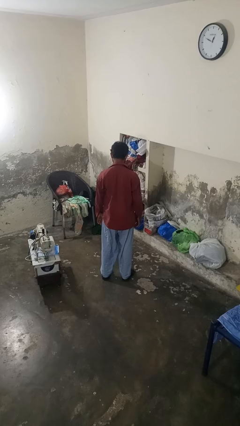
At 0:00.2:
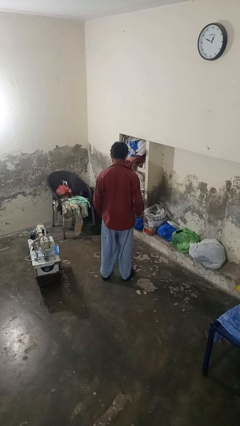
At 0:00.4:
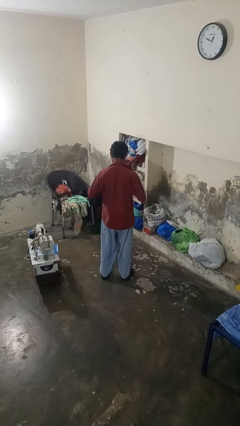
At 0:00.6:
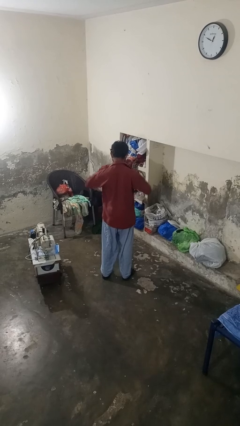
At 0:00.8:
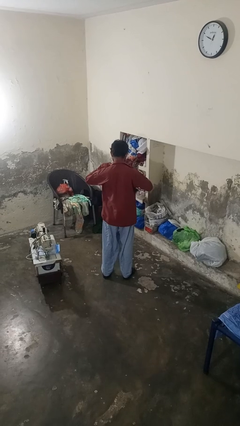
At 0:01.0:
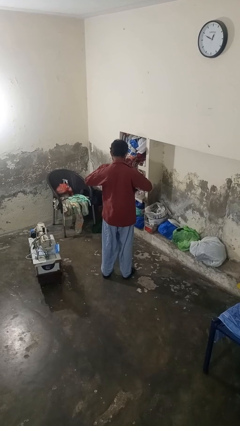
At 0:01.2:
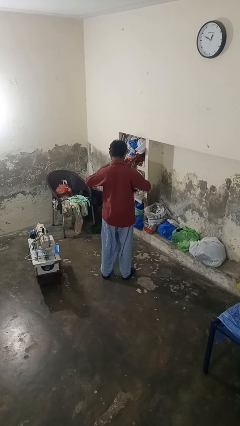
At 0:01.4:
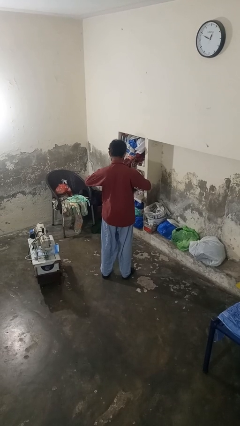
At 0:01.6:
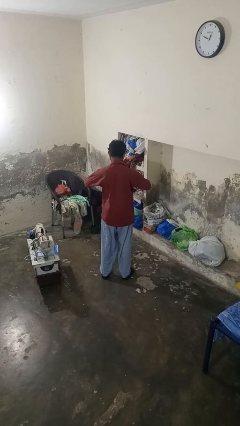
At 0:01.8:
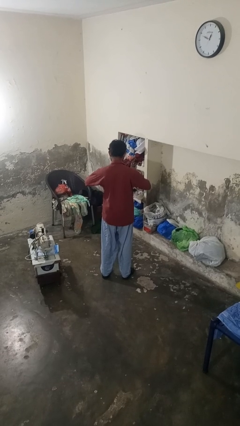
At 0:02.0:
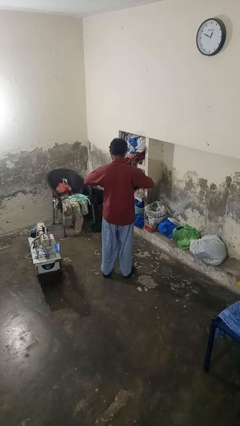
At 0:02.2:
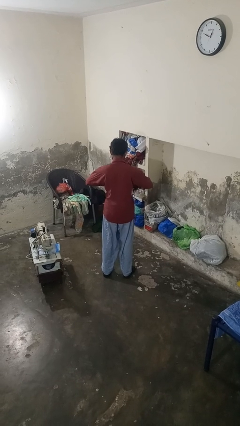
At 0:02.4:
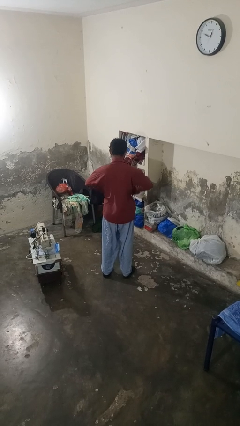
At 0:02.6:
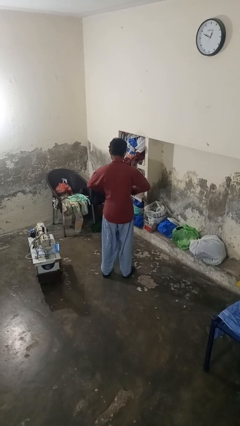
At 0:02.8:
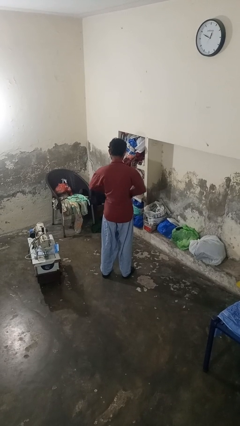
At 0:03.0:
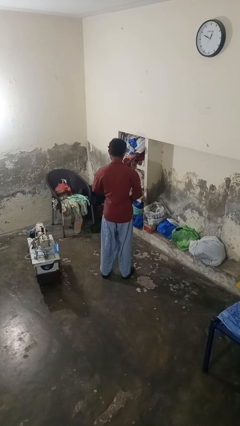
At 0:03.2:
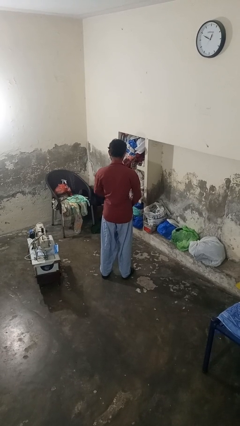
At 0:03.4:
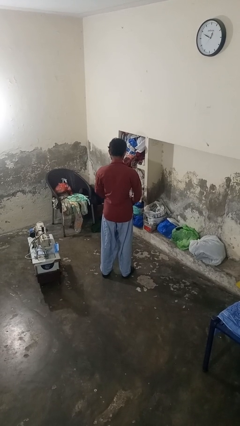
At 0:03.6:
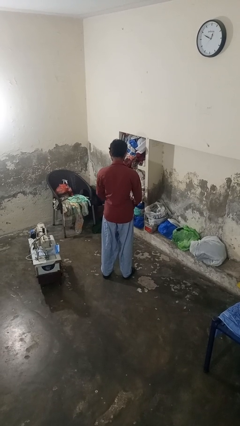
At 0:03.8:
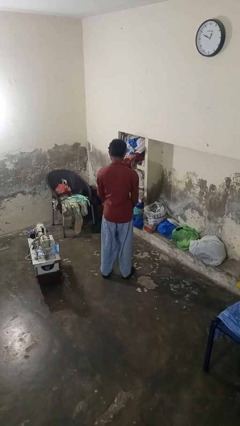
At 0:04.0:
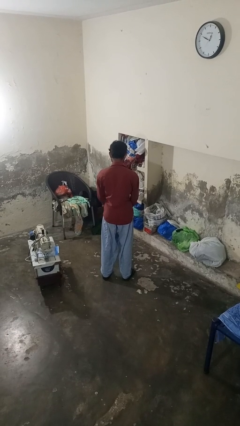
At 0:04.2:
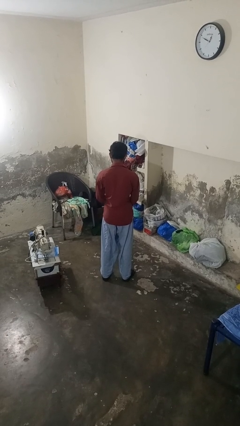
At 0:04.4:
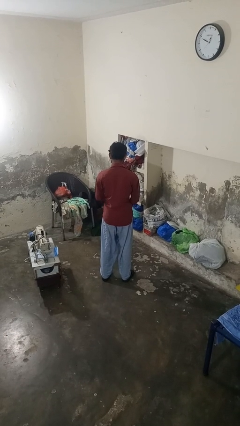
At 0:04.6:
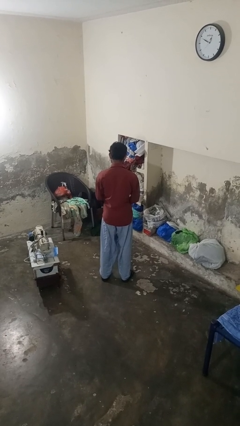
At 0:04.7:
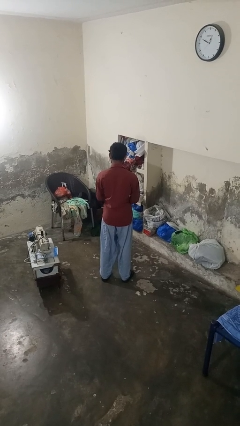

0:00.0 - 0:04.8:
person buttons shirt

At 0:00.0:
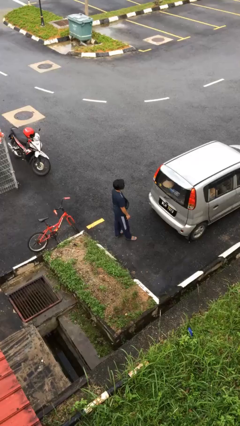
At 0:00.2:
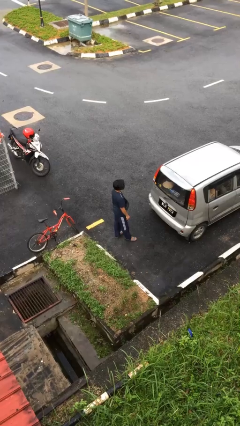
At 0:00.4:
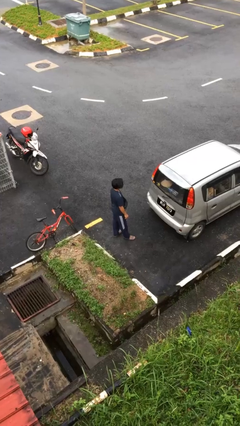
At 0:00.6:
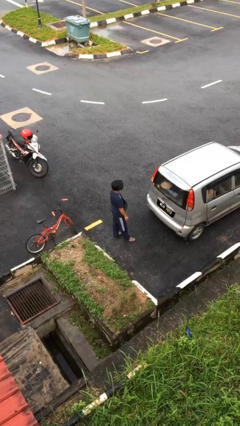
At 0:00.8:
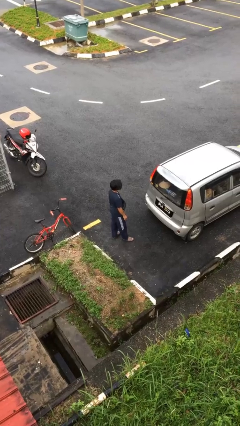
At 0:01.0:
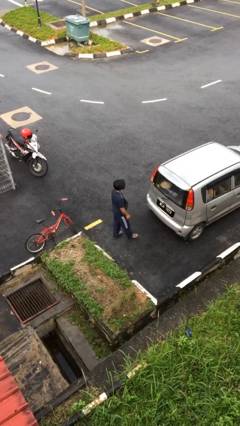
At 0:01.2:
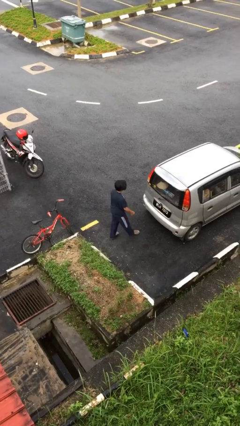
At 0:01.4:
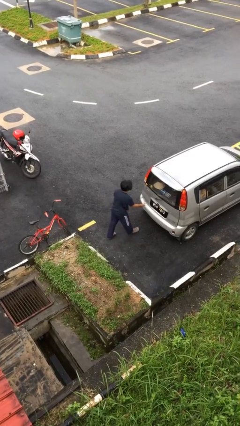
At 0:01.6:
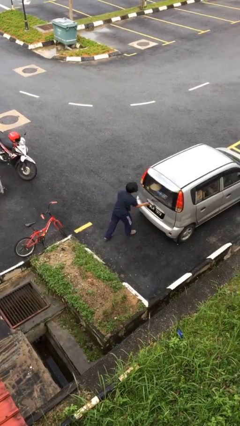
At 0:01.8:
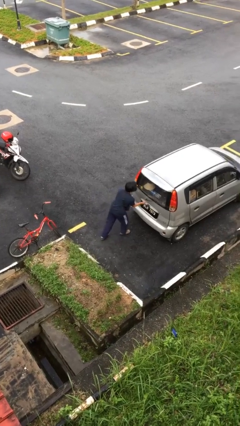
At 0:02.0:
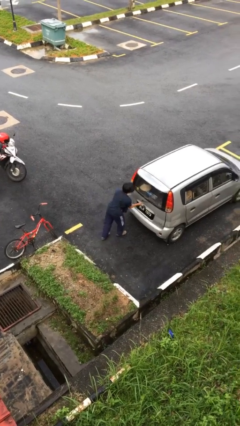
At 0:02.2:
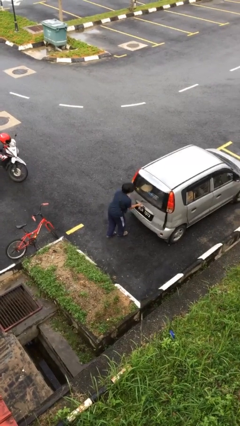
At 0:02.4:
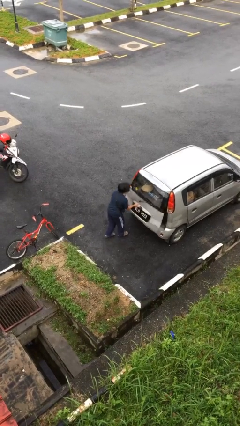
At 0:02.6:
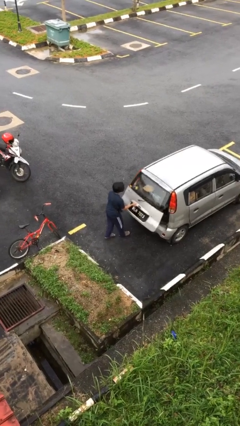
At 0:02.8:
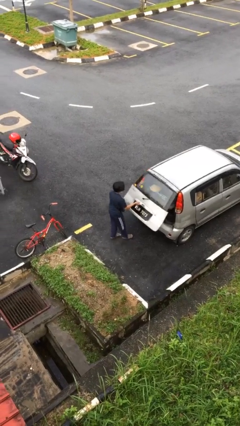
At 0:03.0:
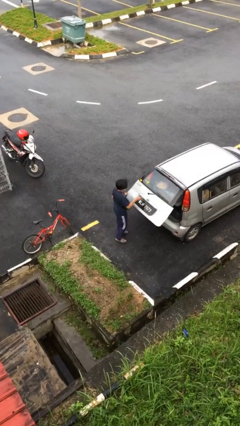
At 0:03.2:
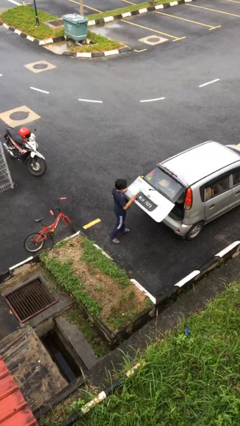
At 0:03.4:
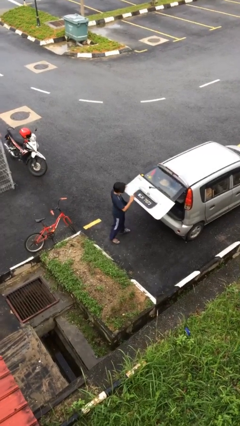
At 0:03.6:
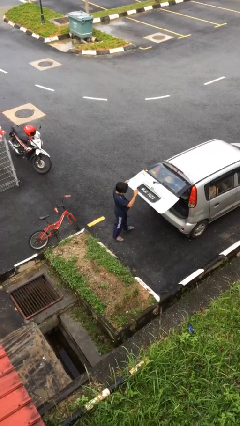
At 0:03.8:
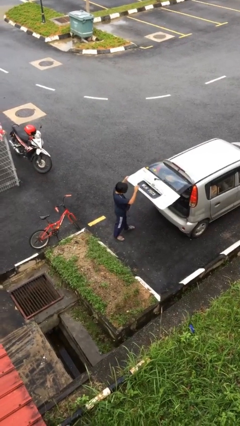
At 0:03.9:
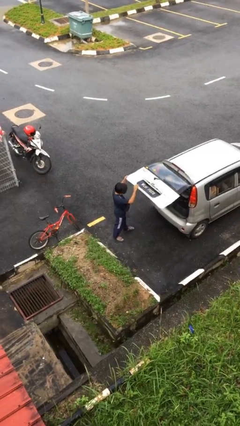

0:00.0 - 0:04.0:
person opens car trunk

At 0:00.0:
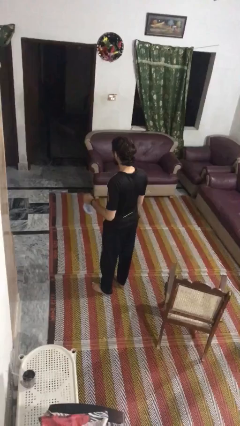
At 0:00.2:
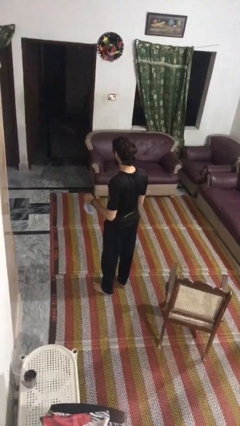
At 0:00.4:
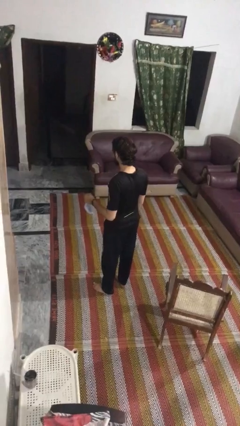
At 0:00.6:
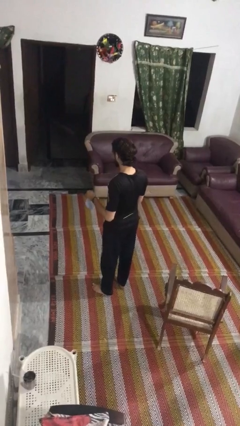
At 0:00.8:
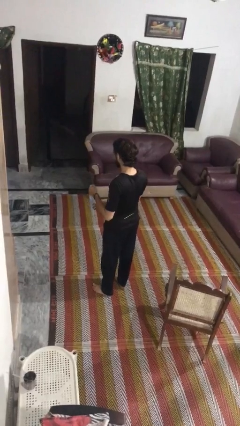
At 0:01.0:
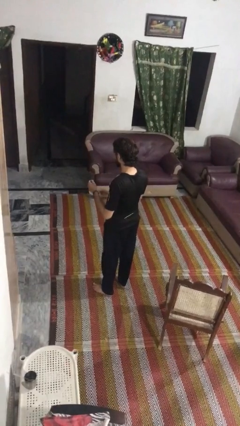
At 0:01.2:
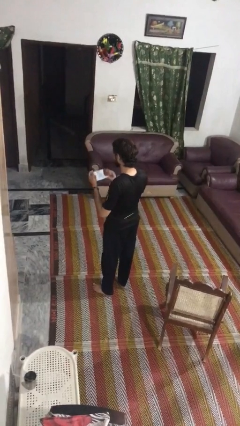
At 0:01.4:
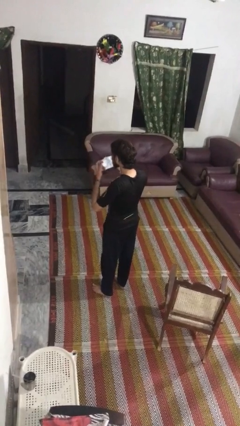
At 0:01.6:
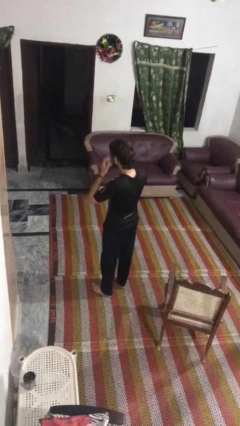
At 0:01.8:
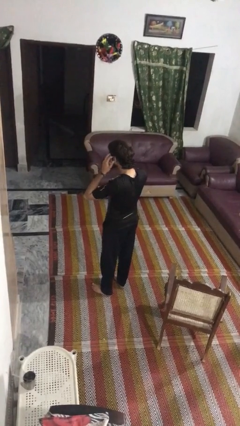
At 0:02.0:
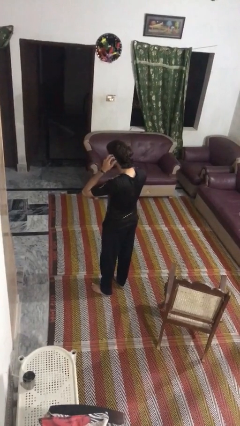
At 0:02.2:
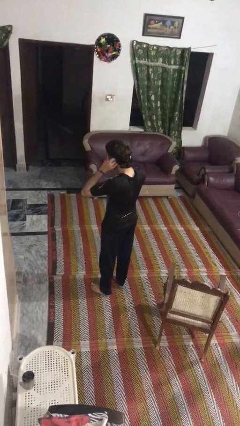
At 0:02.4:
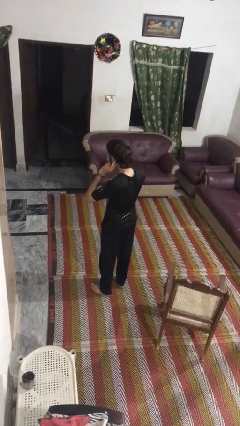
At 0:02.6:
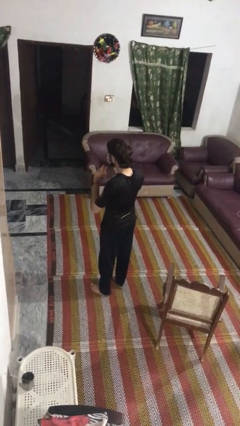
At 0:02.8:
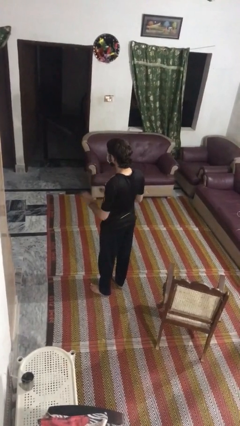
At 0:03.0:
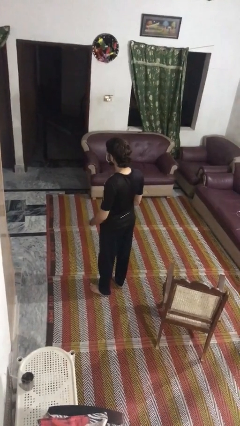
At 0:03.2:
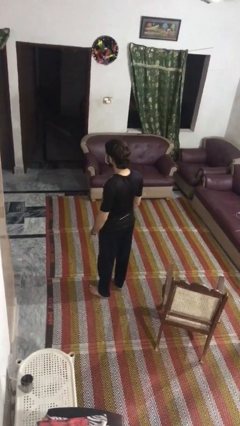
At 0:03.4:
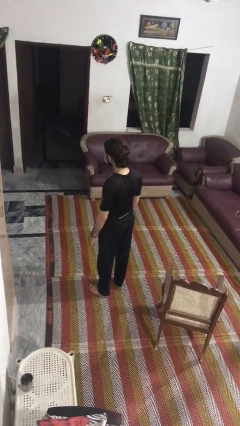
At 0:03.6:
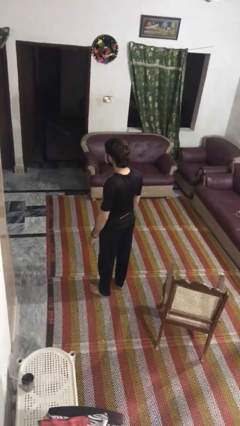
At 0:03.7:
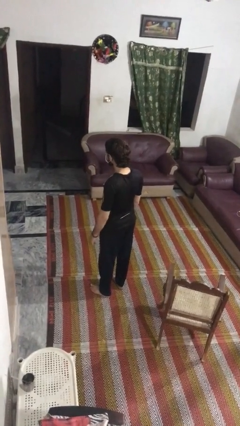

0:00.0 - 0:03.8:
person puts on facemask

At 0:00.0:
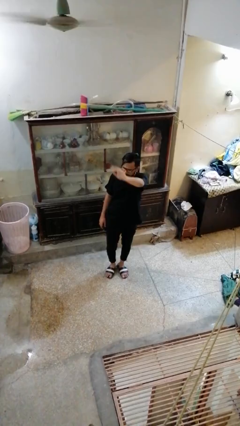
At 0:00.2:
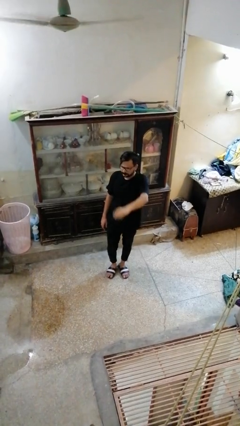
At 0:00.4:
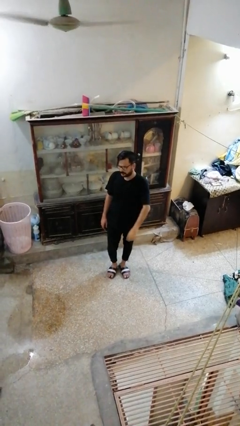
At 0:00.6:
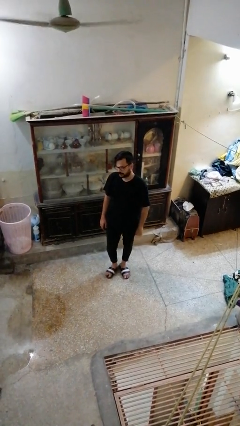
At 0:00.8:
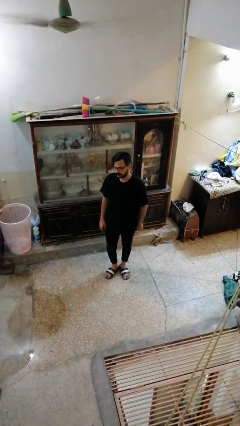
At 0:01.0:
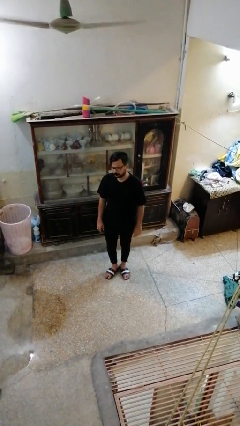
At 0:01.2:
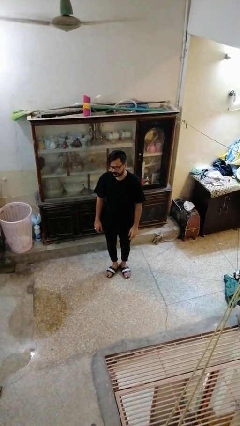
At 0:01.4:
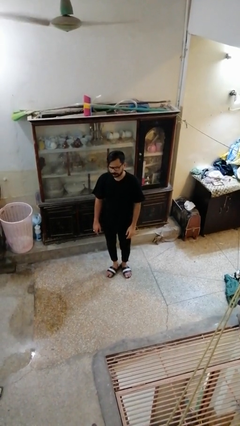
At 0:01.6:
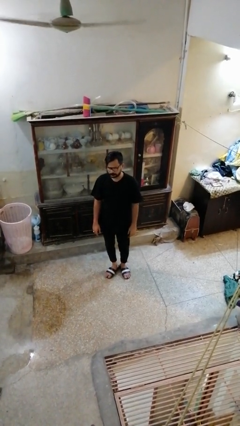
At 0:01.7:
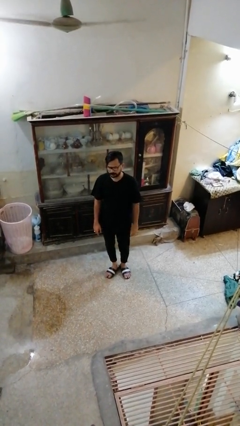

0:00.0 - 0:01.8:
person gestures lower hand

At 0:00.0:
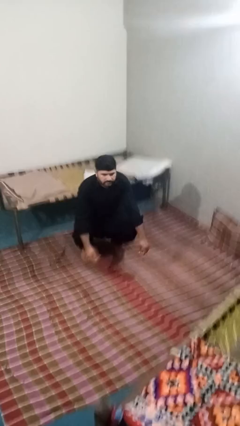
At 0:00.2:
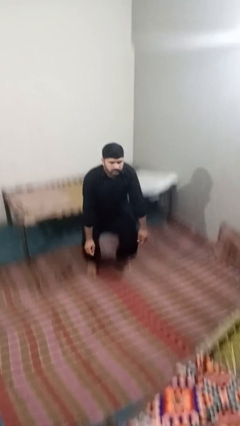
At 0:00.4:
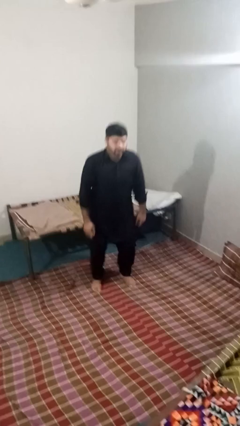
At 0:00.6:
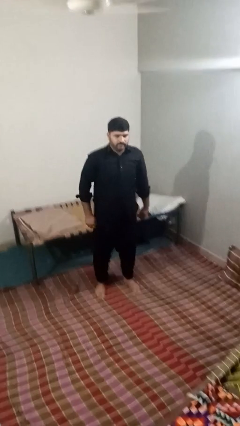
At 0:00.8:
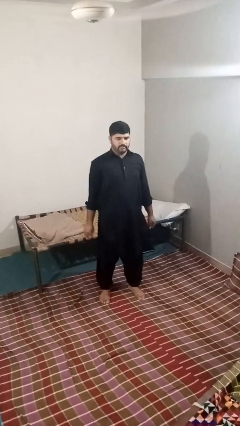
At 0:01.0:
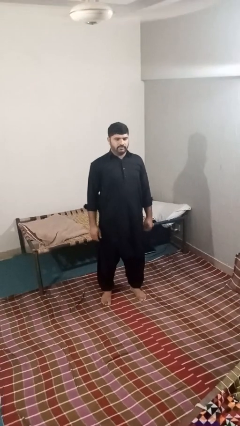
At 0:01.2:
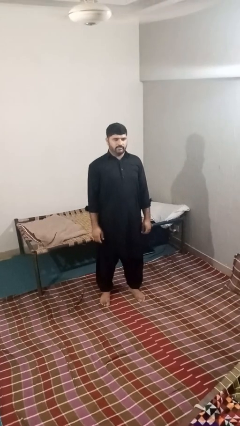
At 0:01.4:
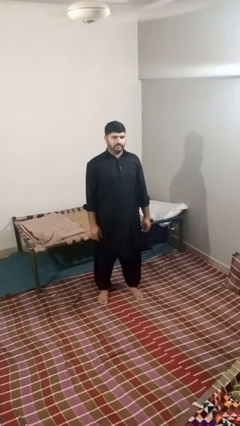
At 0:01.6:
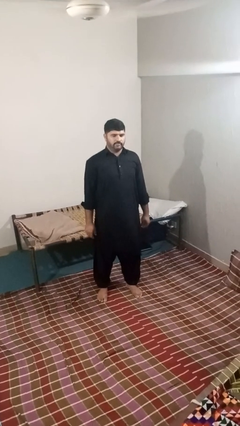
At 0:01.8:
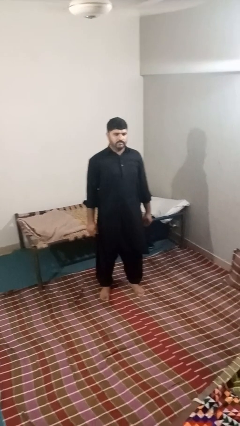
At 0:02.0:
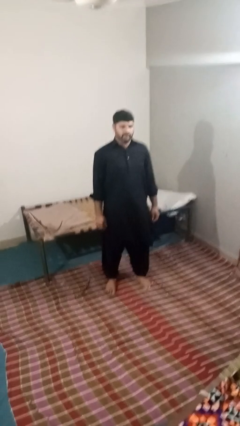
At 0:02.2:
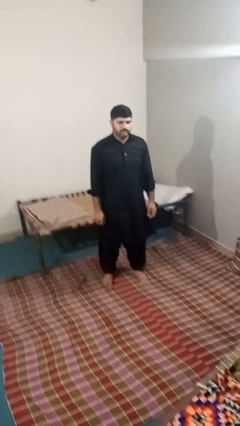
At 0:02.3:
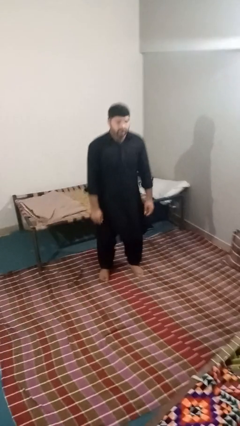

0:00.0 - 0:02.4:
person stands up

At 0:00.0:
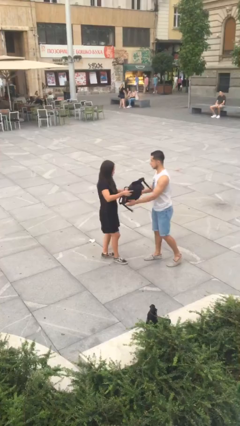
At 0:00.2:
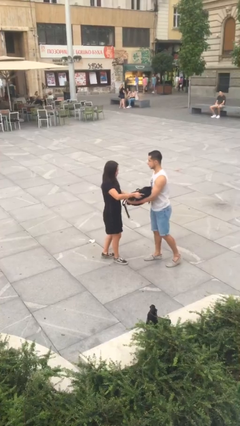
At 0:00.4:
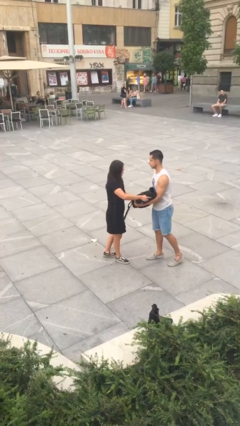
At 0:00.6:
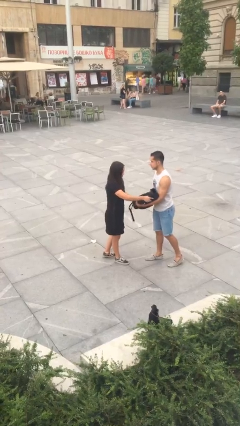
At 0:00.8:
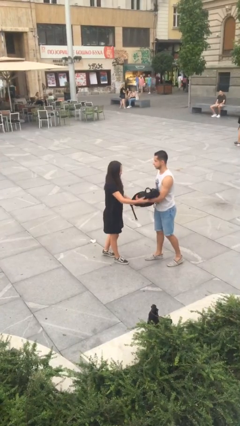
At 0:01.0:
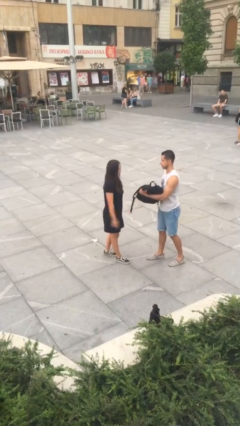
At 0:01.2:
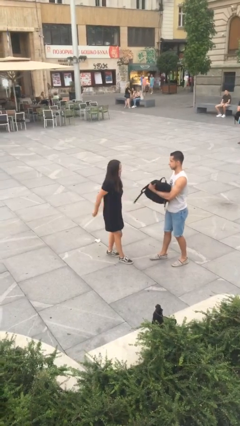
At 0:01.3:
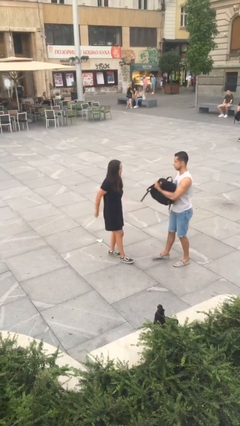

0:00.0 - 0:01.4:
person transfers object to person
